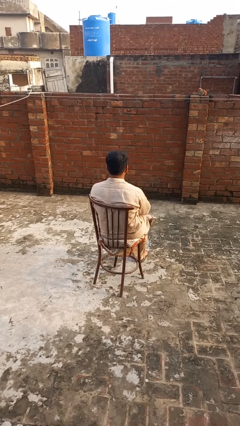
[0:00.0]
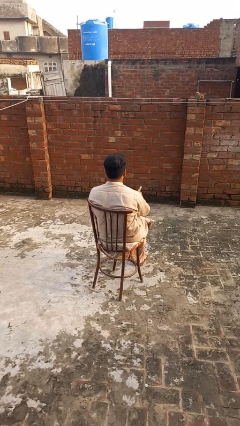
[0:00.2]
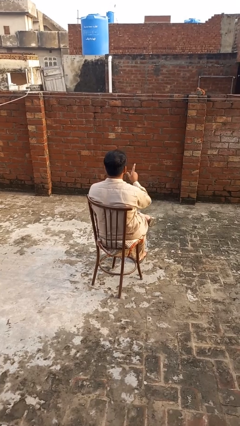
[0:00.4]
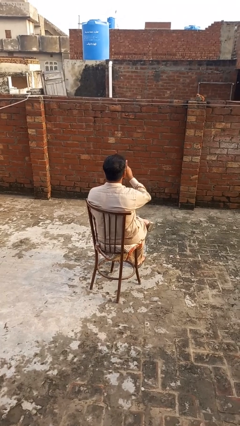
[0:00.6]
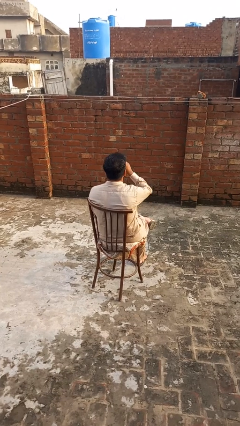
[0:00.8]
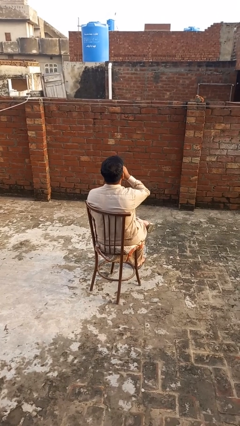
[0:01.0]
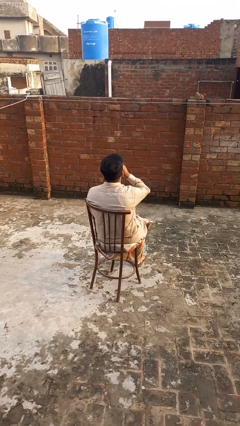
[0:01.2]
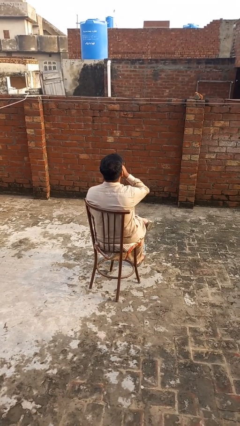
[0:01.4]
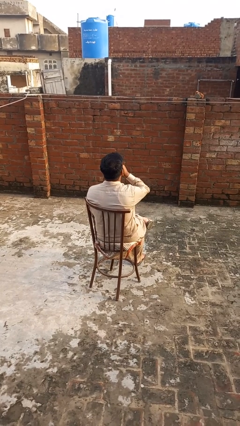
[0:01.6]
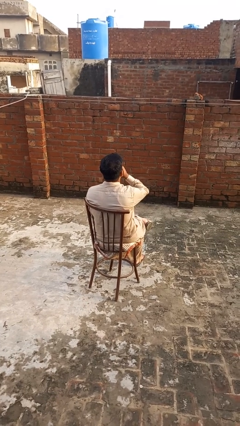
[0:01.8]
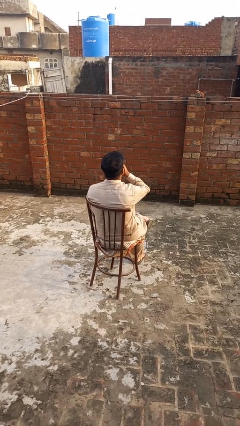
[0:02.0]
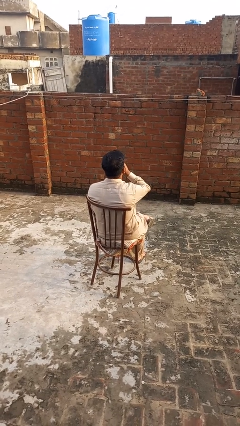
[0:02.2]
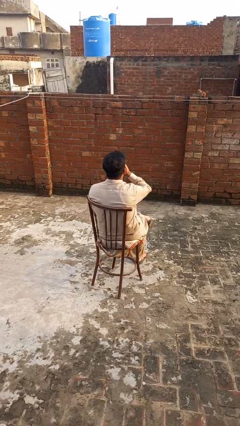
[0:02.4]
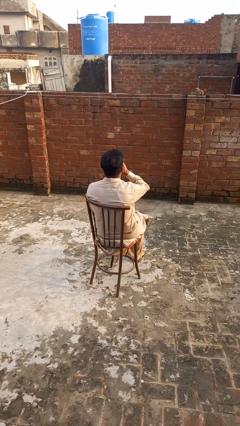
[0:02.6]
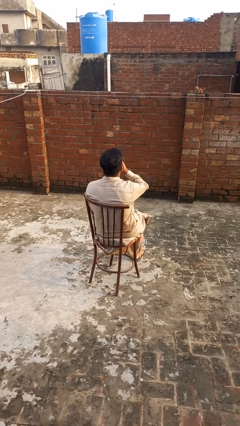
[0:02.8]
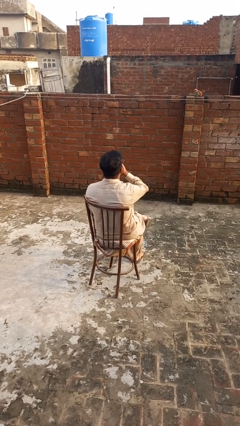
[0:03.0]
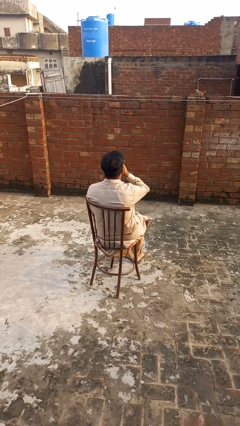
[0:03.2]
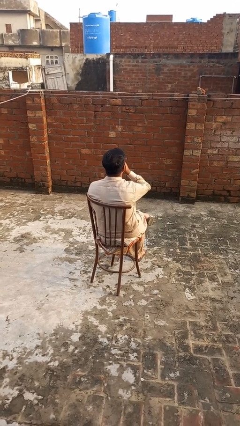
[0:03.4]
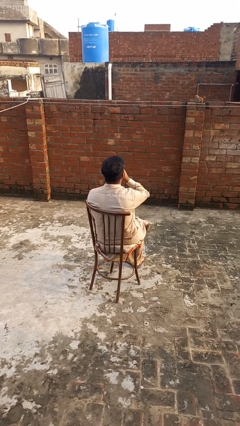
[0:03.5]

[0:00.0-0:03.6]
person gestures be quiet

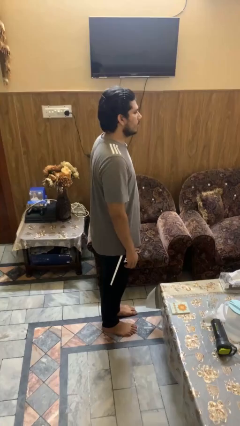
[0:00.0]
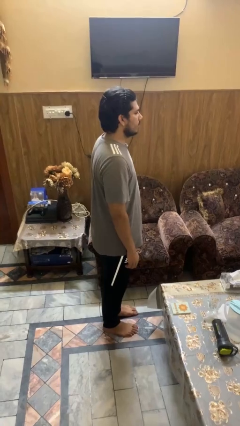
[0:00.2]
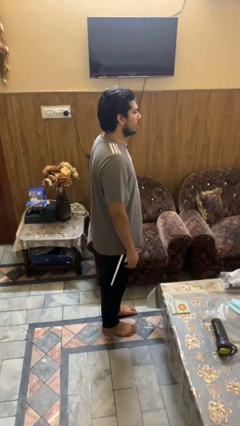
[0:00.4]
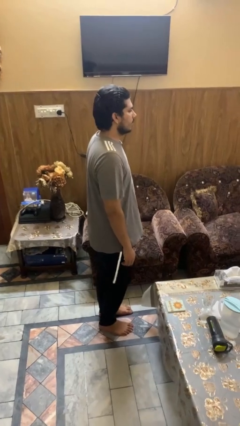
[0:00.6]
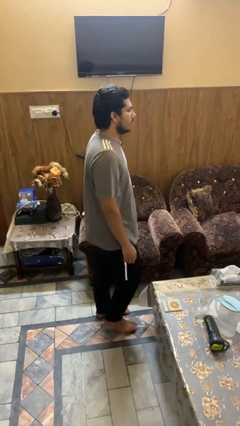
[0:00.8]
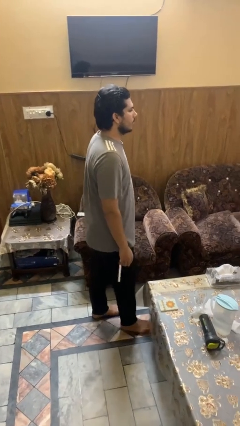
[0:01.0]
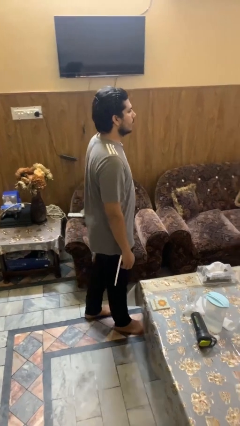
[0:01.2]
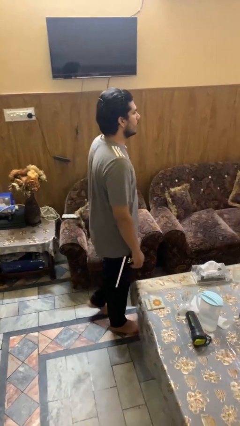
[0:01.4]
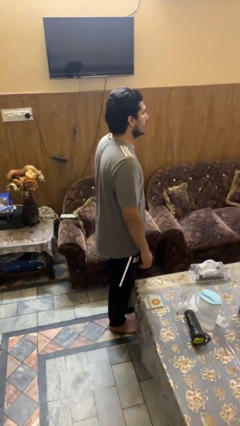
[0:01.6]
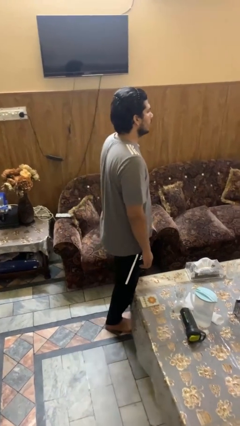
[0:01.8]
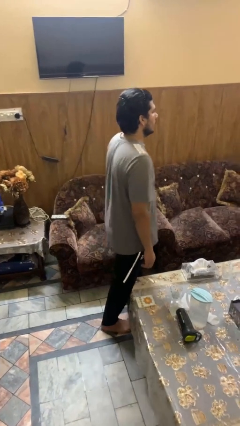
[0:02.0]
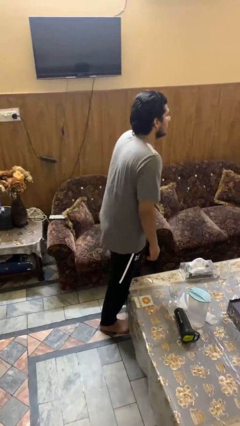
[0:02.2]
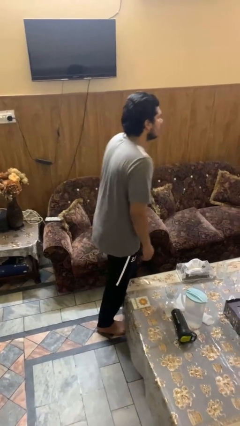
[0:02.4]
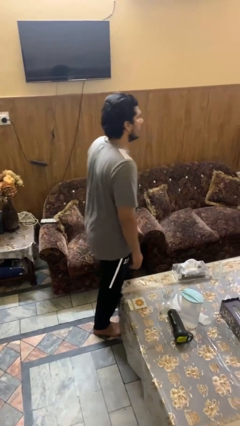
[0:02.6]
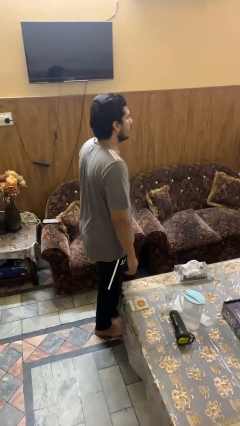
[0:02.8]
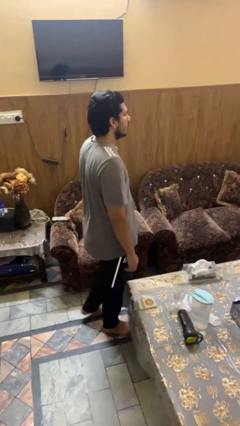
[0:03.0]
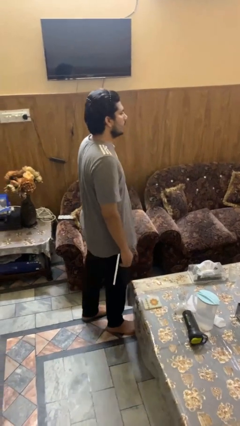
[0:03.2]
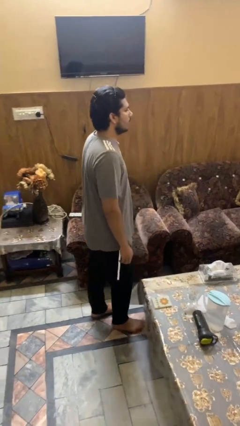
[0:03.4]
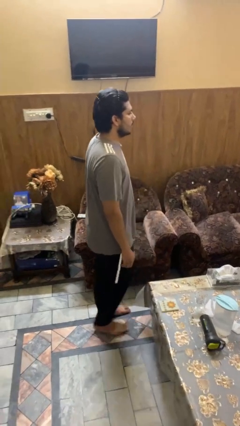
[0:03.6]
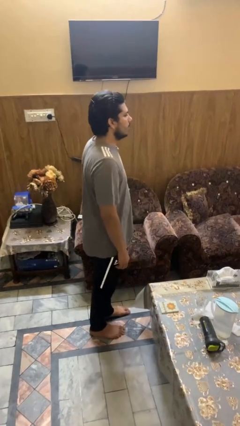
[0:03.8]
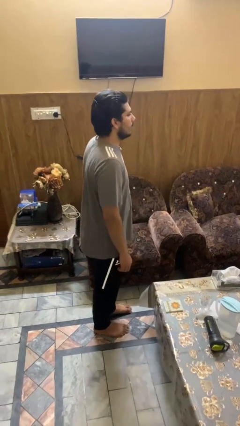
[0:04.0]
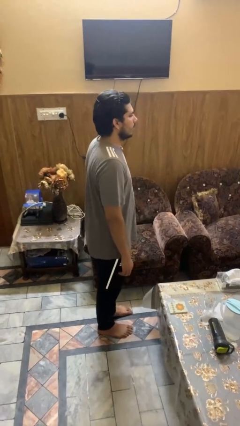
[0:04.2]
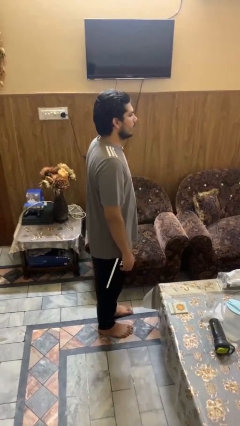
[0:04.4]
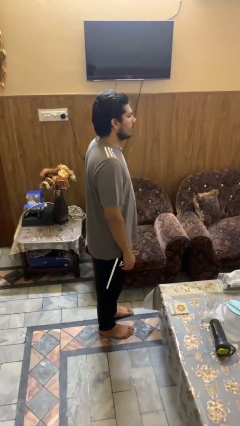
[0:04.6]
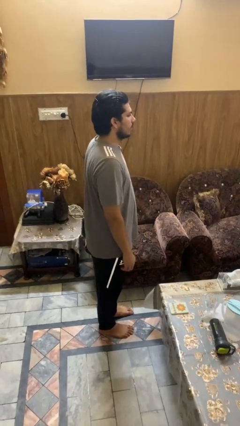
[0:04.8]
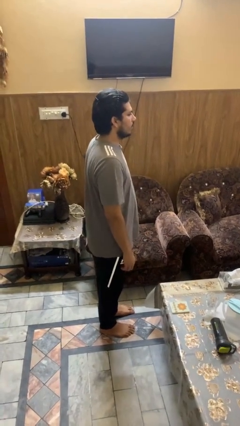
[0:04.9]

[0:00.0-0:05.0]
person bumps into table

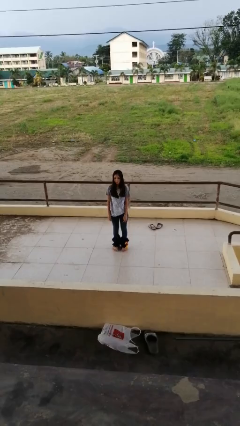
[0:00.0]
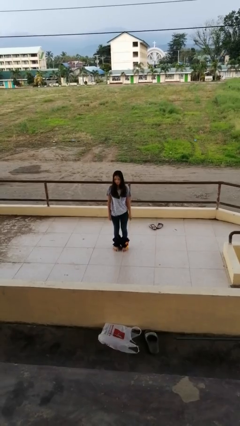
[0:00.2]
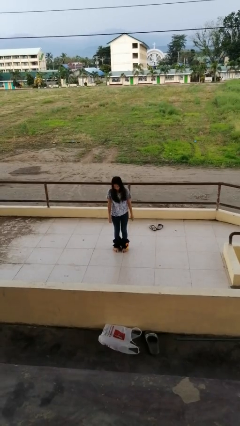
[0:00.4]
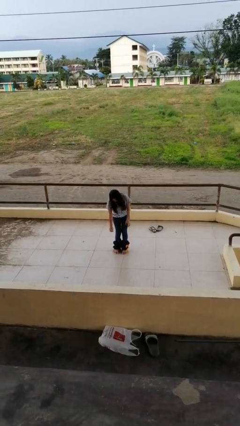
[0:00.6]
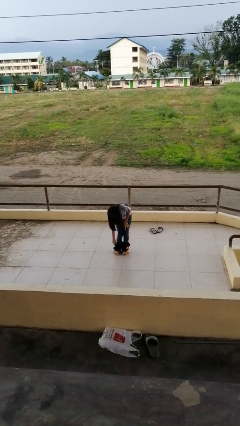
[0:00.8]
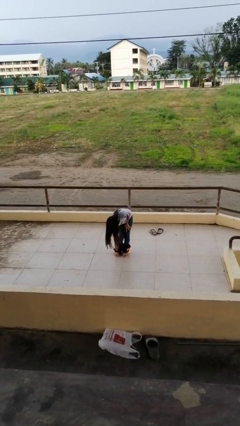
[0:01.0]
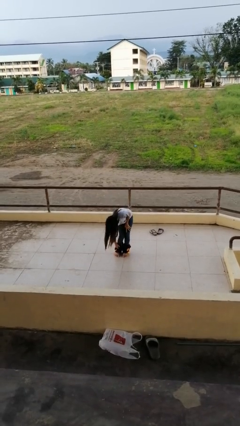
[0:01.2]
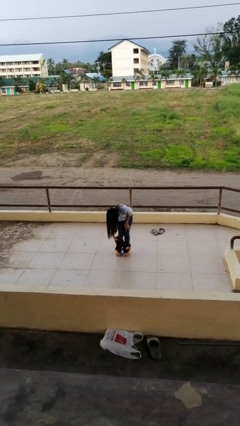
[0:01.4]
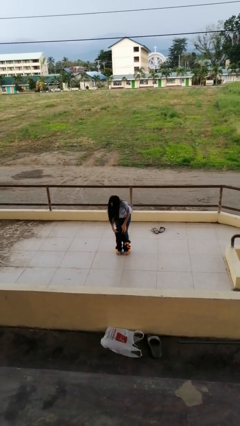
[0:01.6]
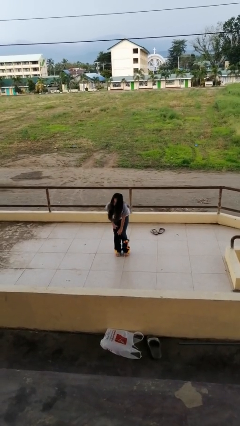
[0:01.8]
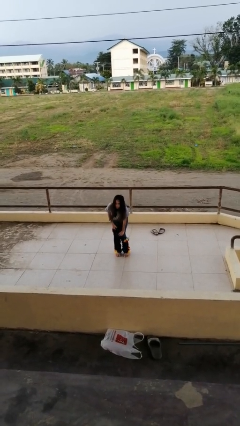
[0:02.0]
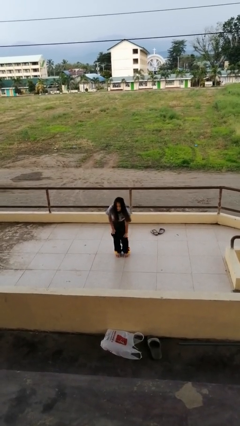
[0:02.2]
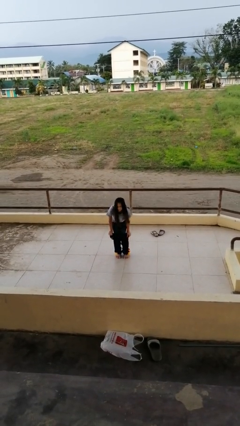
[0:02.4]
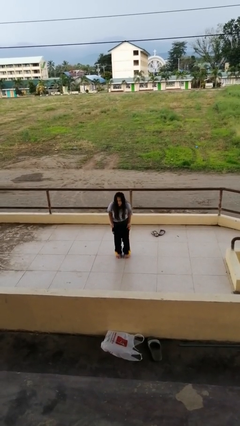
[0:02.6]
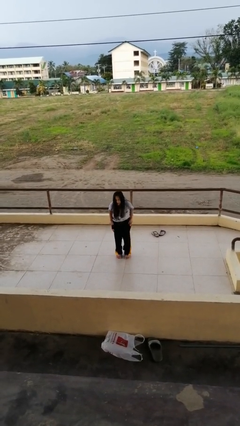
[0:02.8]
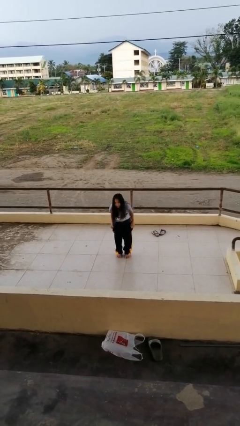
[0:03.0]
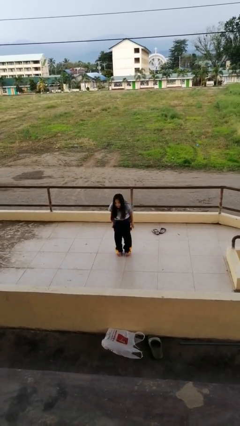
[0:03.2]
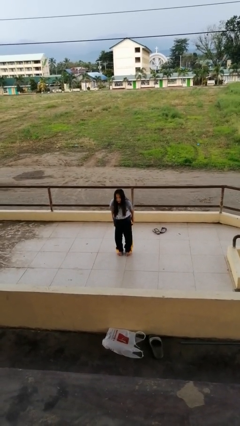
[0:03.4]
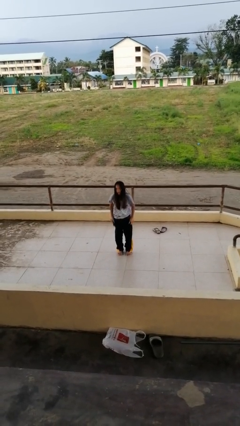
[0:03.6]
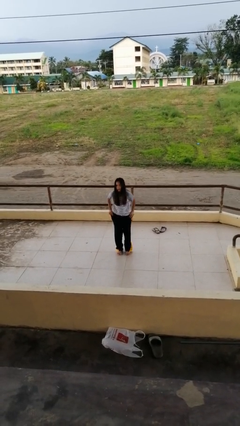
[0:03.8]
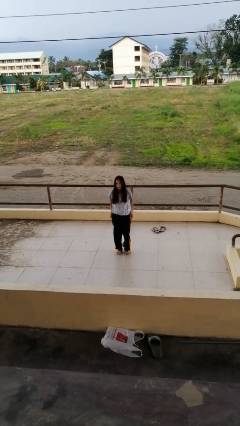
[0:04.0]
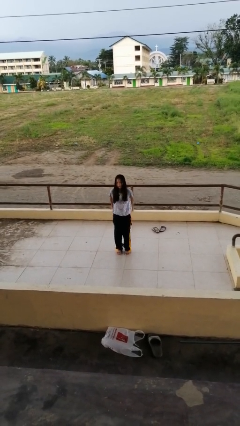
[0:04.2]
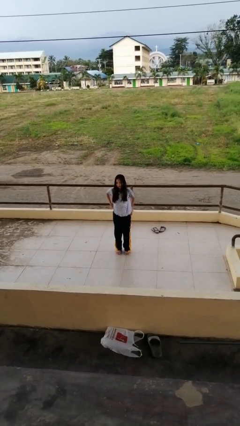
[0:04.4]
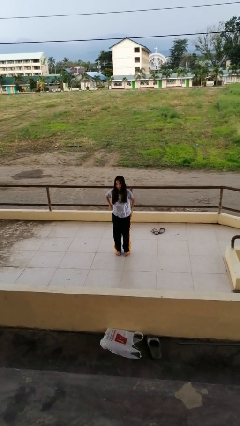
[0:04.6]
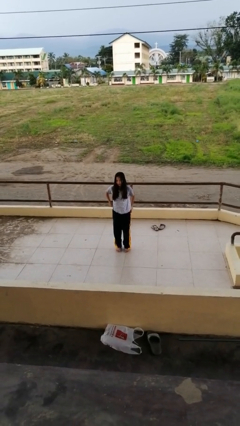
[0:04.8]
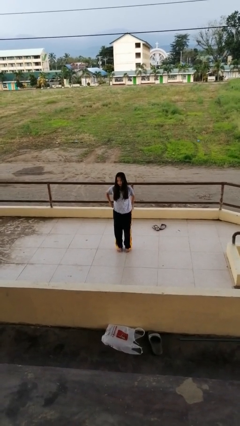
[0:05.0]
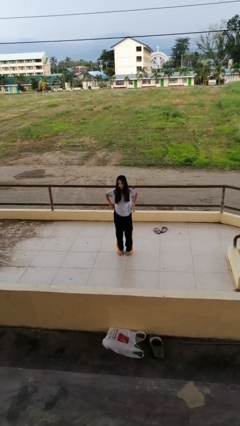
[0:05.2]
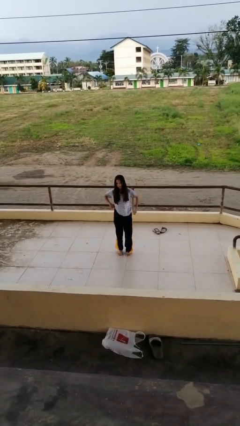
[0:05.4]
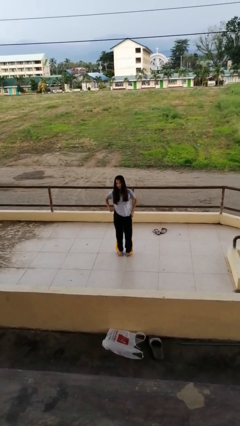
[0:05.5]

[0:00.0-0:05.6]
person puts on pants

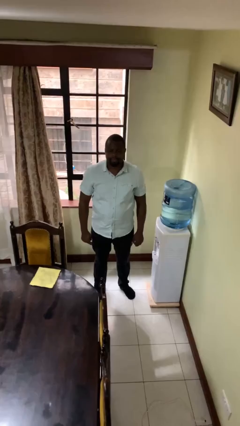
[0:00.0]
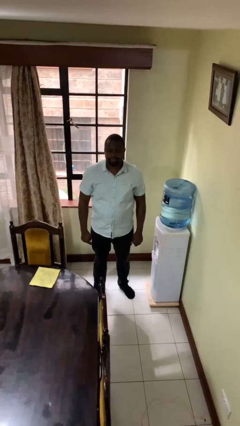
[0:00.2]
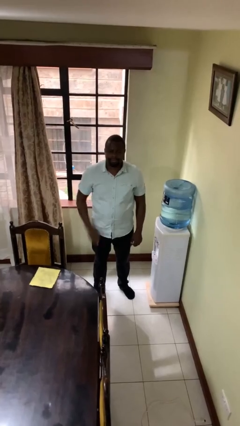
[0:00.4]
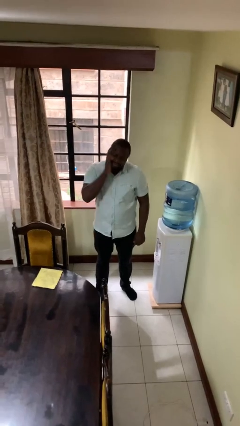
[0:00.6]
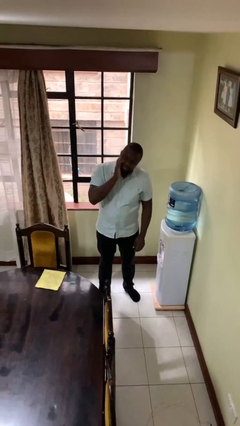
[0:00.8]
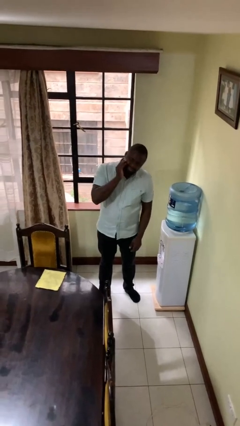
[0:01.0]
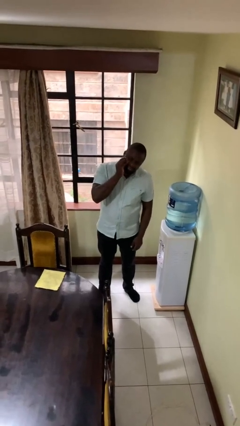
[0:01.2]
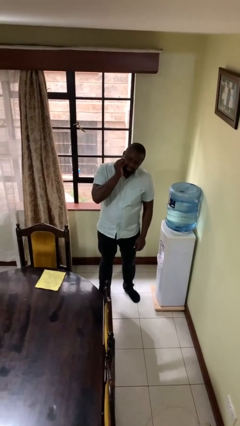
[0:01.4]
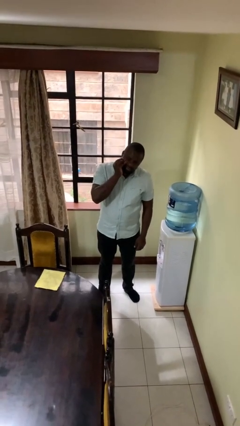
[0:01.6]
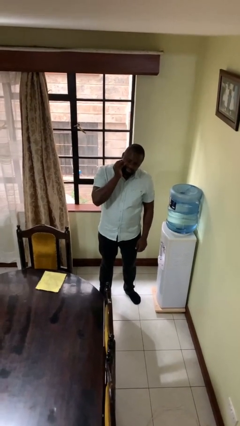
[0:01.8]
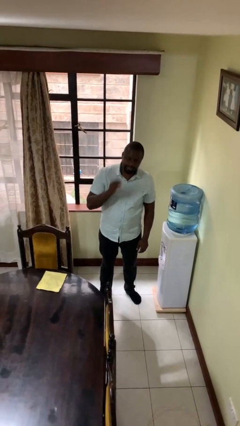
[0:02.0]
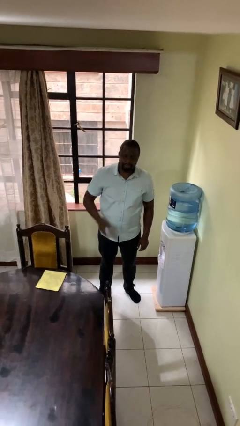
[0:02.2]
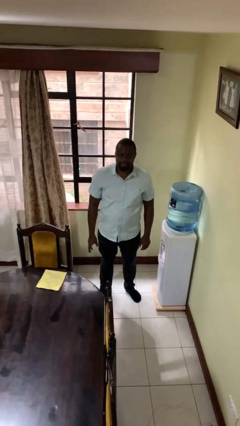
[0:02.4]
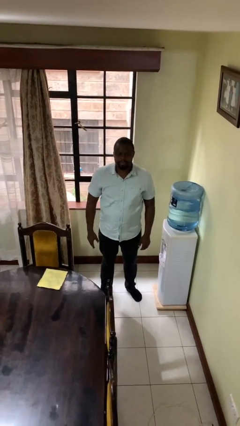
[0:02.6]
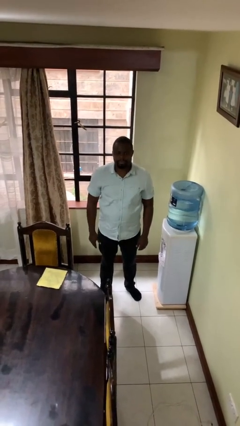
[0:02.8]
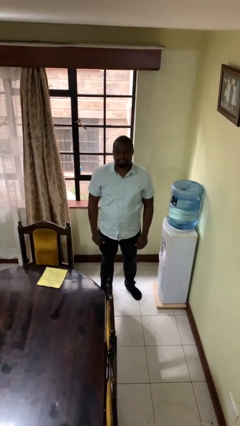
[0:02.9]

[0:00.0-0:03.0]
person swats bug

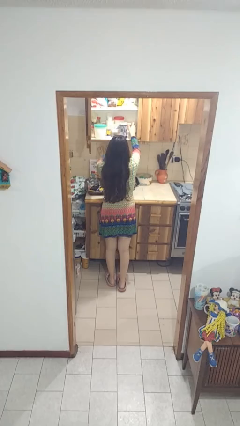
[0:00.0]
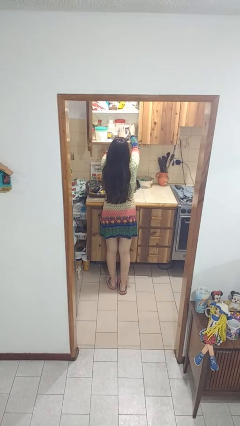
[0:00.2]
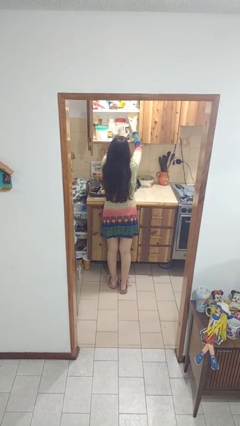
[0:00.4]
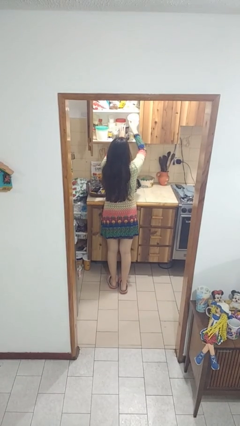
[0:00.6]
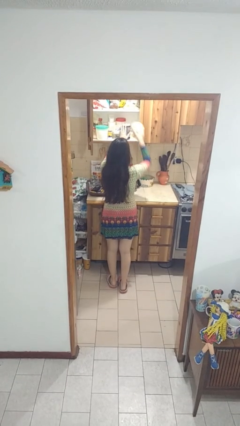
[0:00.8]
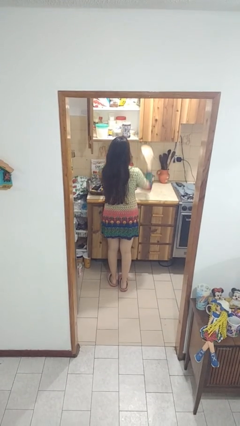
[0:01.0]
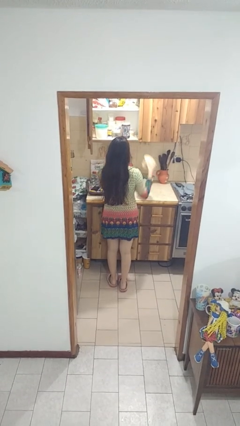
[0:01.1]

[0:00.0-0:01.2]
person takes object from cabinet
